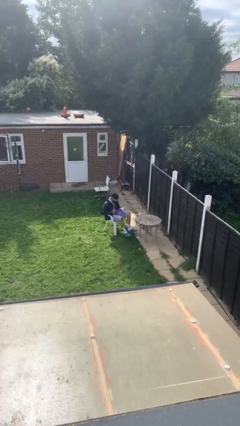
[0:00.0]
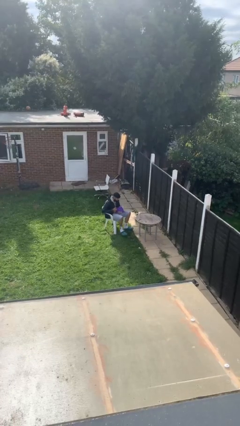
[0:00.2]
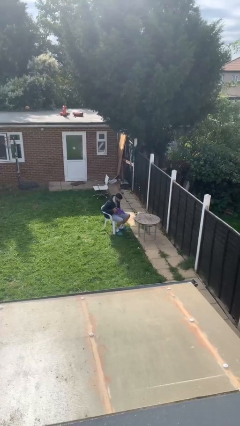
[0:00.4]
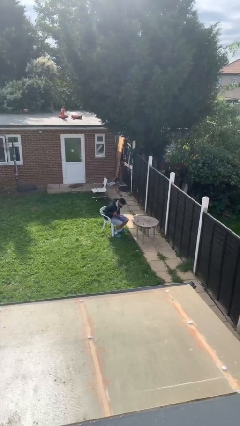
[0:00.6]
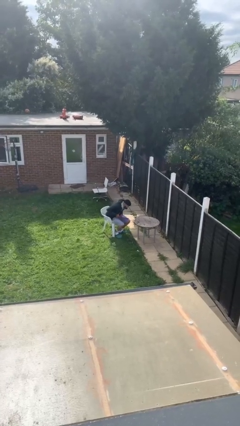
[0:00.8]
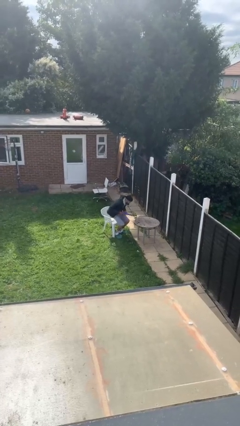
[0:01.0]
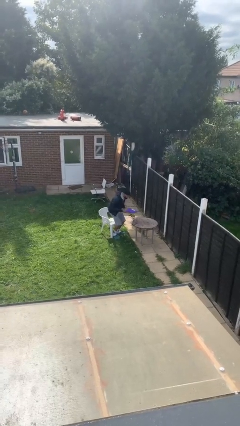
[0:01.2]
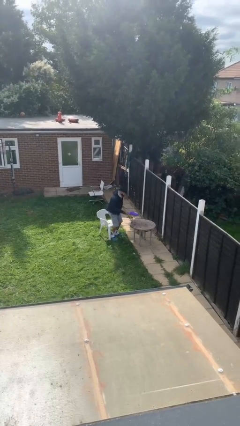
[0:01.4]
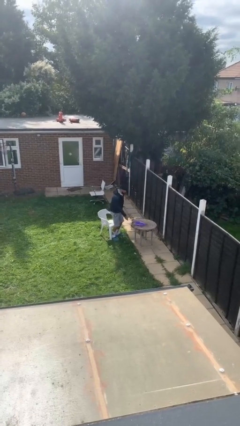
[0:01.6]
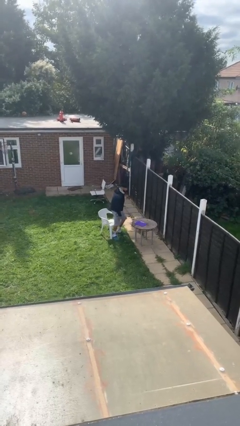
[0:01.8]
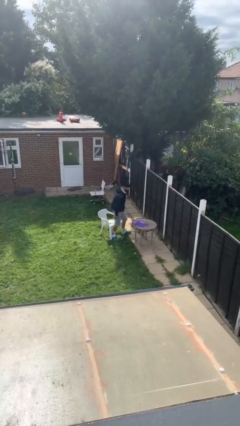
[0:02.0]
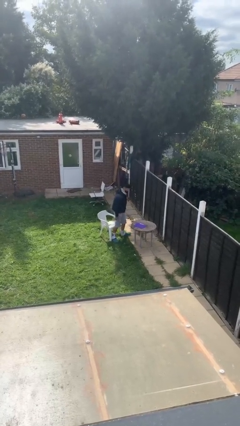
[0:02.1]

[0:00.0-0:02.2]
person stands up

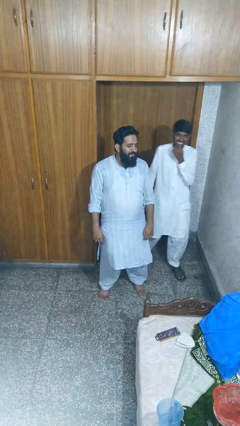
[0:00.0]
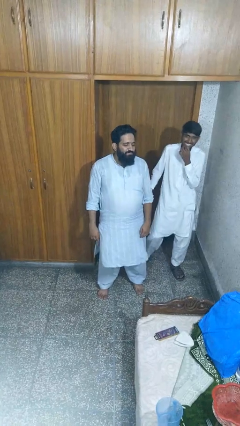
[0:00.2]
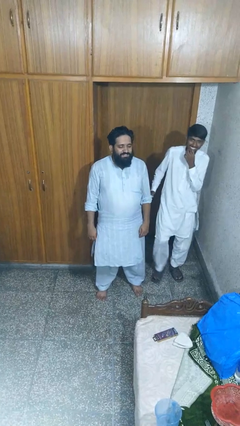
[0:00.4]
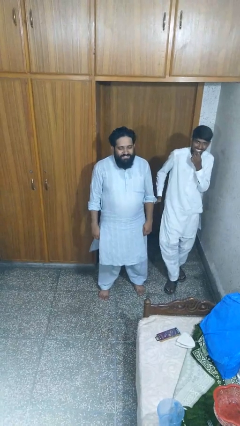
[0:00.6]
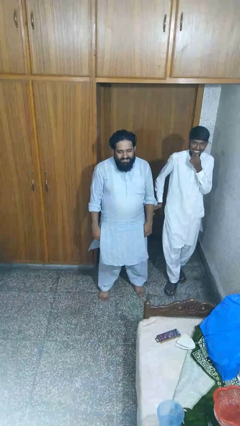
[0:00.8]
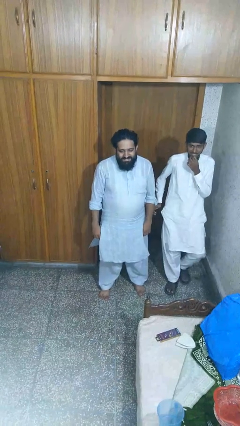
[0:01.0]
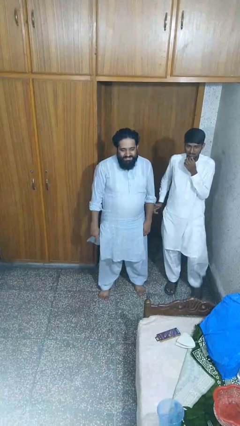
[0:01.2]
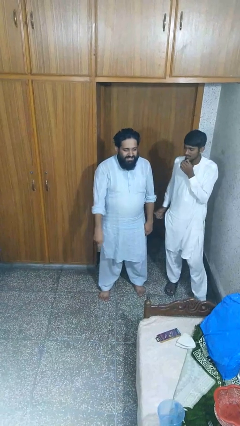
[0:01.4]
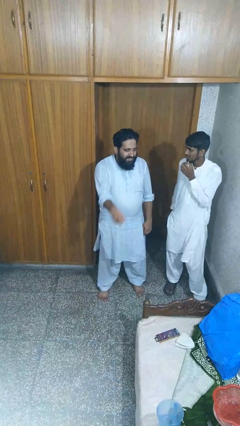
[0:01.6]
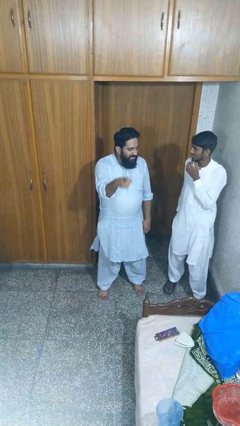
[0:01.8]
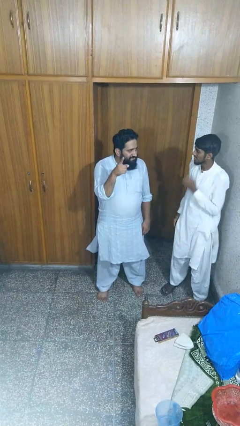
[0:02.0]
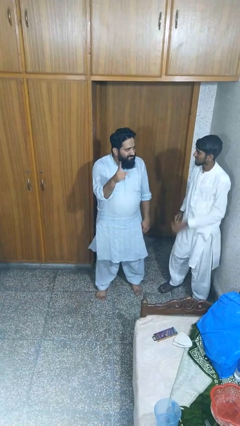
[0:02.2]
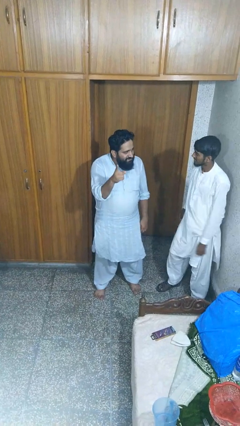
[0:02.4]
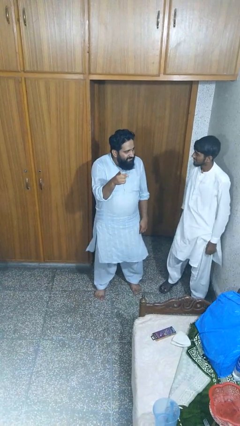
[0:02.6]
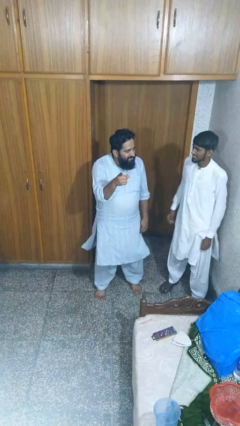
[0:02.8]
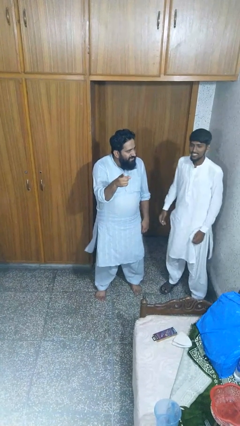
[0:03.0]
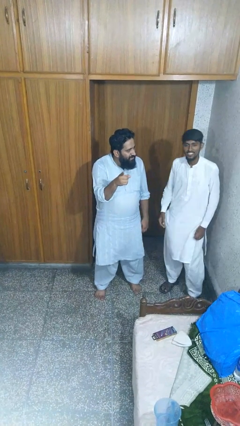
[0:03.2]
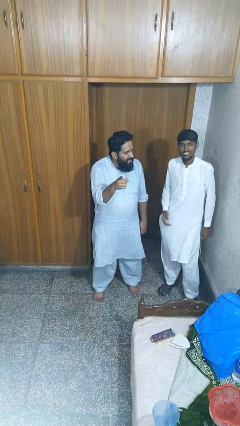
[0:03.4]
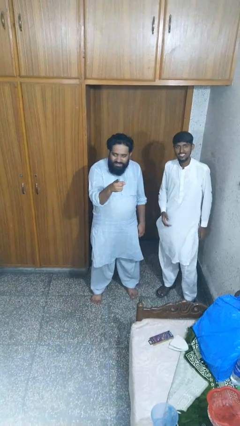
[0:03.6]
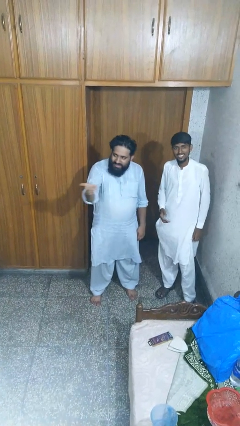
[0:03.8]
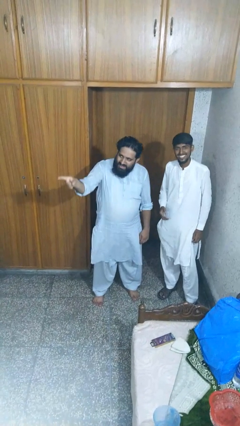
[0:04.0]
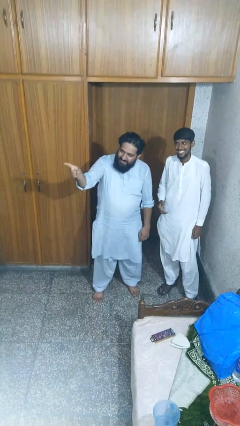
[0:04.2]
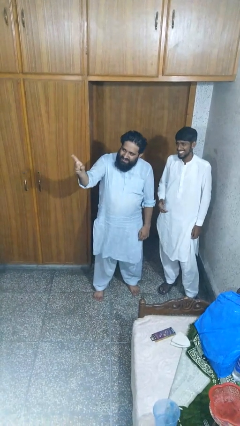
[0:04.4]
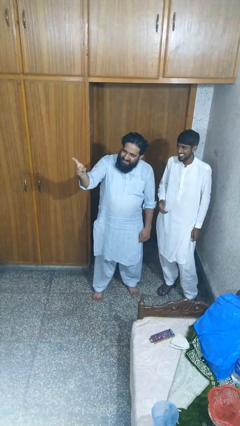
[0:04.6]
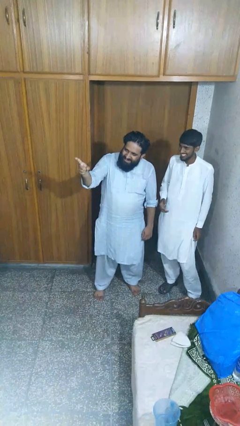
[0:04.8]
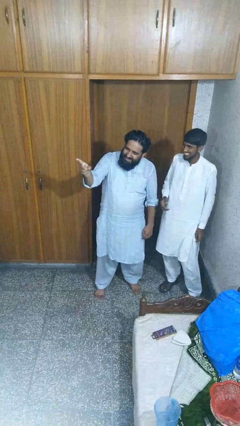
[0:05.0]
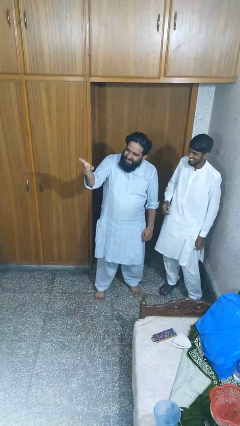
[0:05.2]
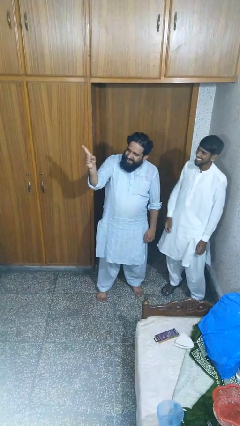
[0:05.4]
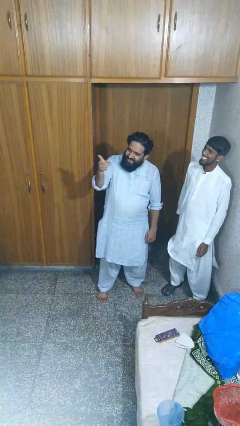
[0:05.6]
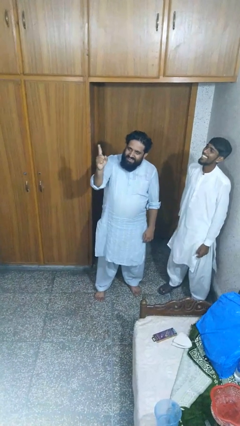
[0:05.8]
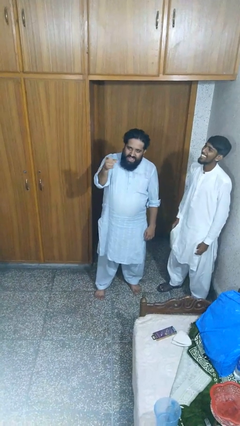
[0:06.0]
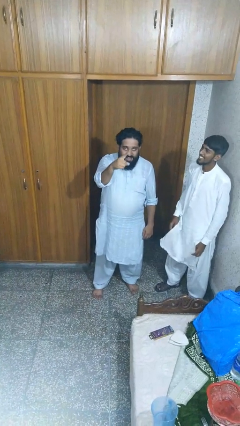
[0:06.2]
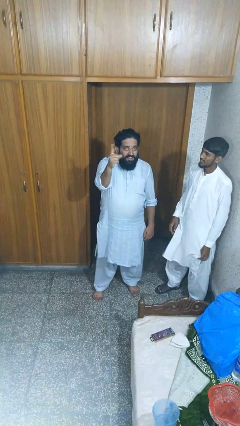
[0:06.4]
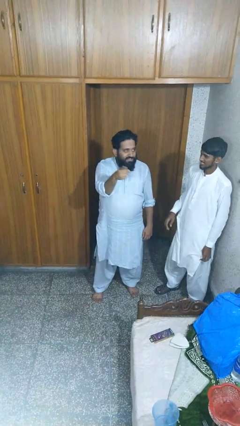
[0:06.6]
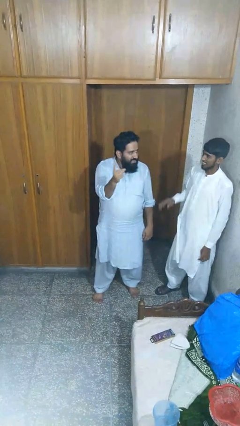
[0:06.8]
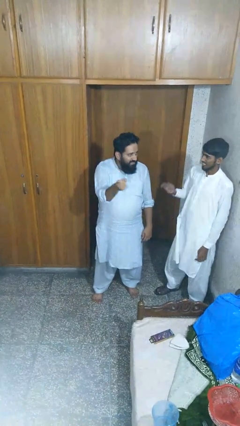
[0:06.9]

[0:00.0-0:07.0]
person points at person

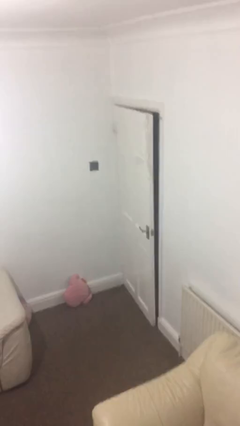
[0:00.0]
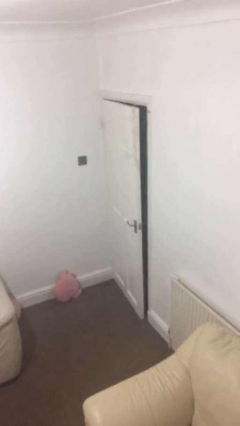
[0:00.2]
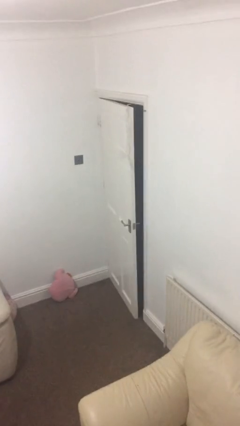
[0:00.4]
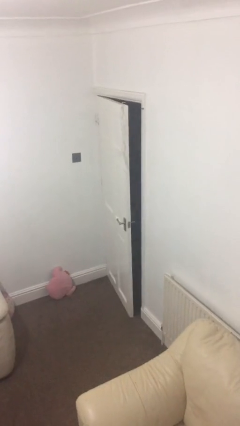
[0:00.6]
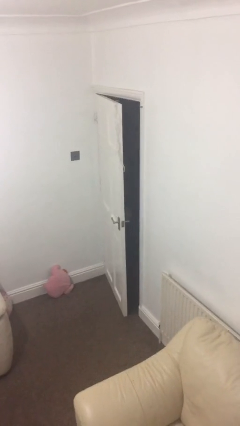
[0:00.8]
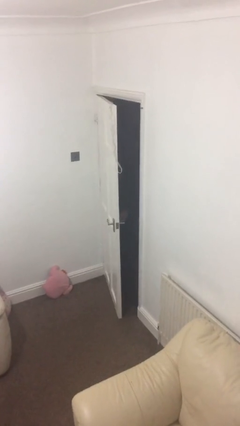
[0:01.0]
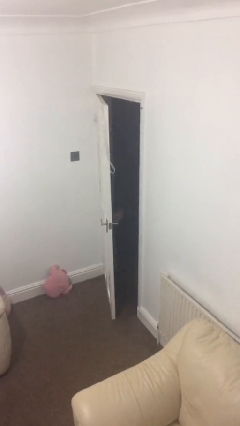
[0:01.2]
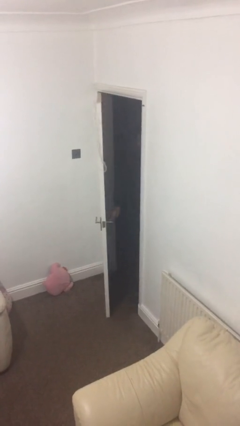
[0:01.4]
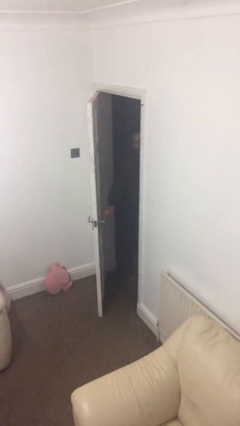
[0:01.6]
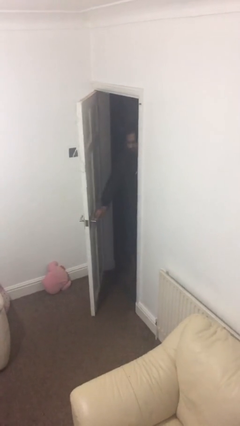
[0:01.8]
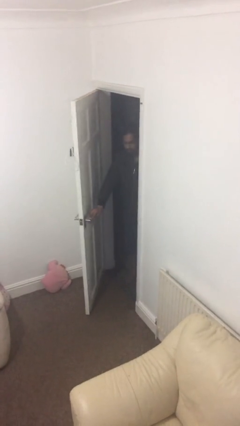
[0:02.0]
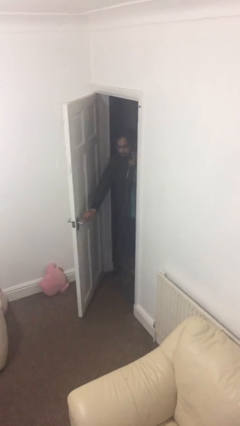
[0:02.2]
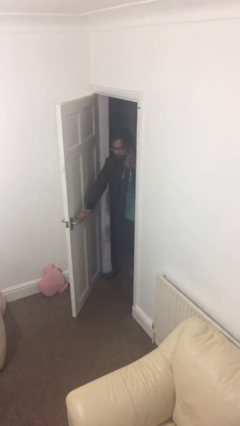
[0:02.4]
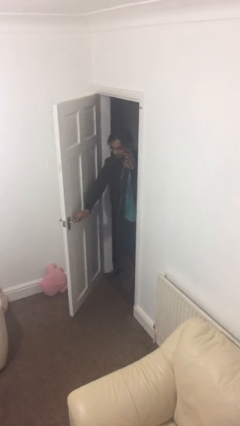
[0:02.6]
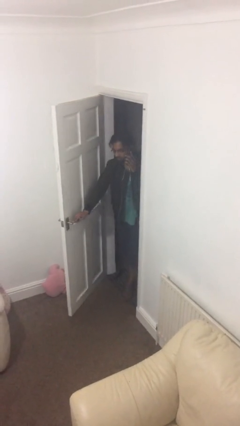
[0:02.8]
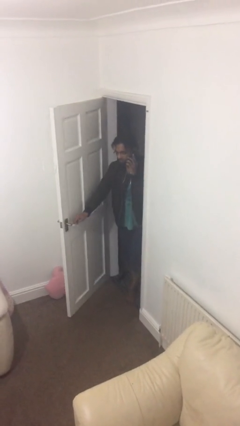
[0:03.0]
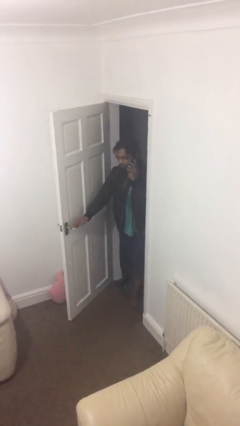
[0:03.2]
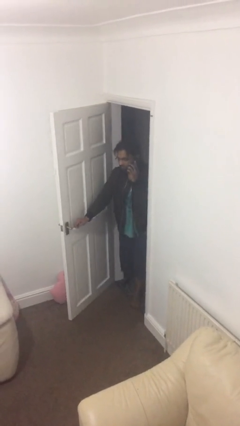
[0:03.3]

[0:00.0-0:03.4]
person opens facility door

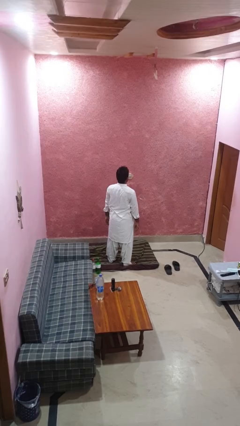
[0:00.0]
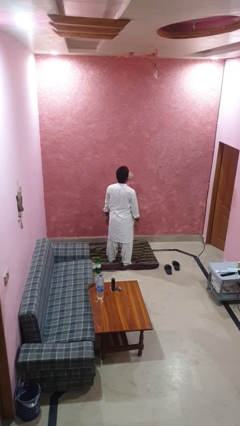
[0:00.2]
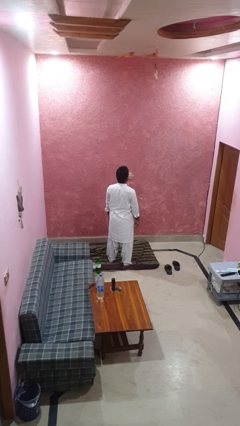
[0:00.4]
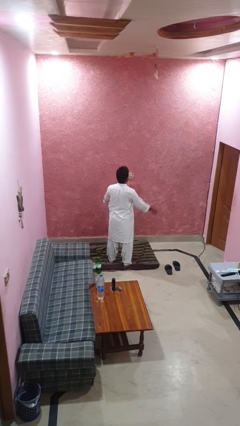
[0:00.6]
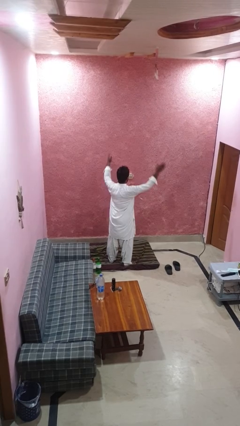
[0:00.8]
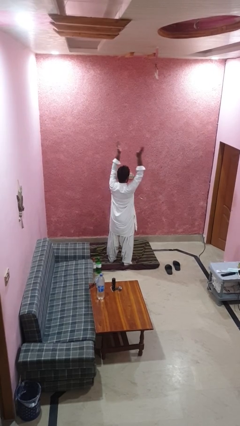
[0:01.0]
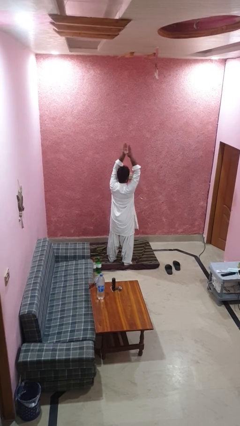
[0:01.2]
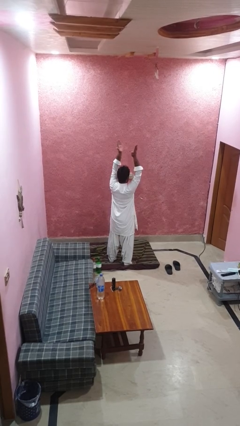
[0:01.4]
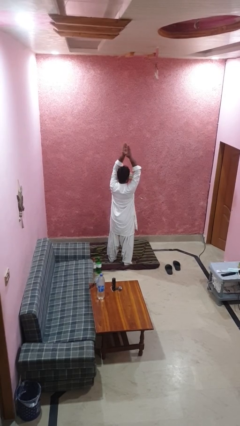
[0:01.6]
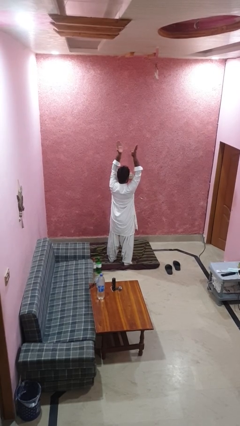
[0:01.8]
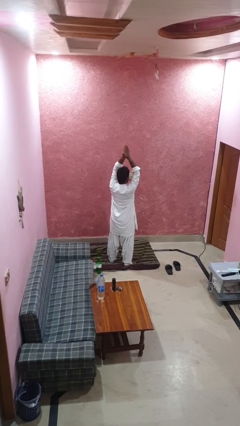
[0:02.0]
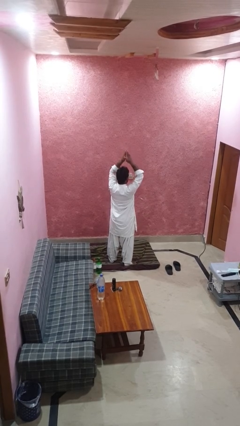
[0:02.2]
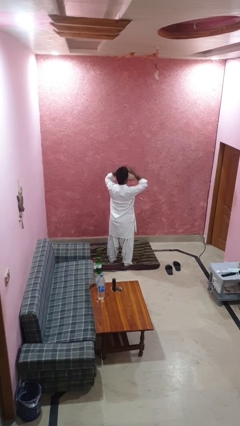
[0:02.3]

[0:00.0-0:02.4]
person claps hands

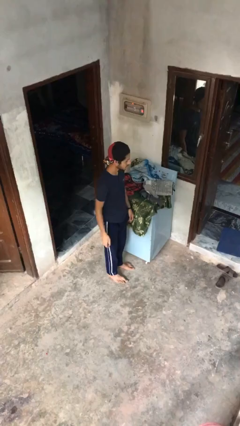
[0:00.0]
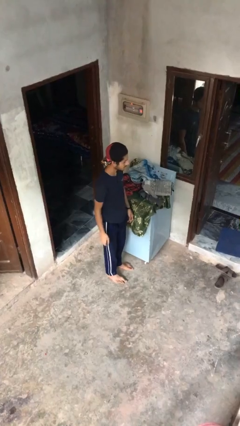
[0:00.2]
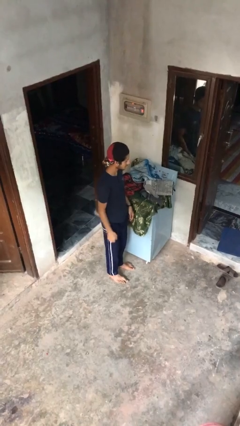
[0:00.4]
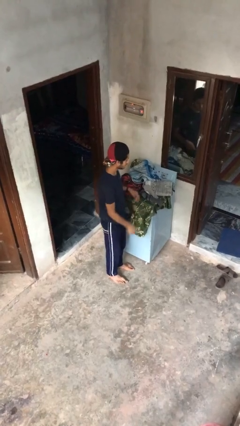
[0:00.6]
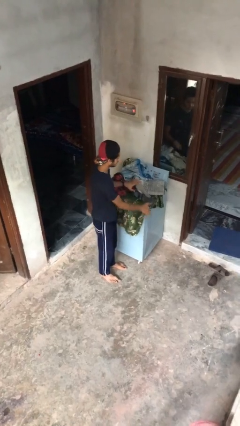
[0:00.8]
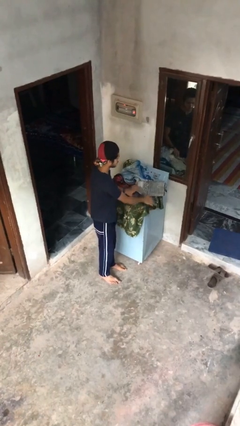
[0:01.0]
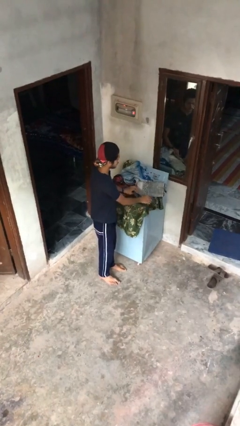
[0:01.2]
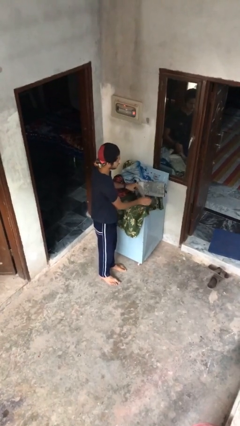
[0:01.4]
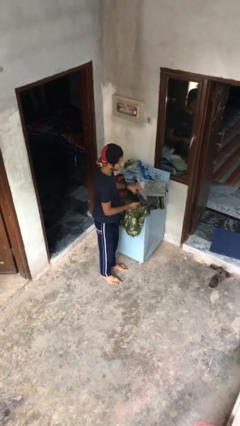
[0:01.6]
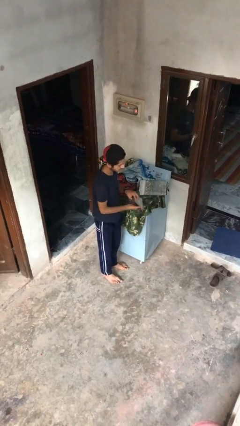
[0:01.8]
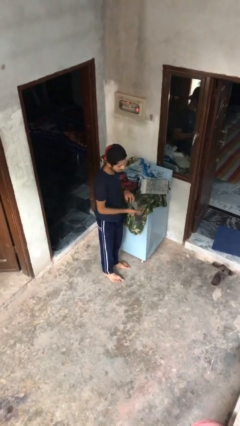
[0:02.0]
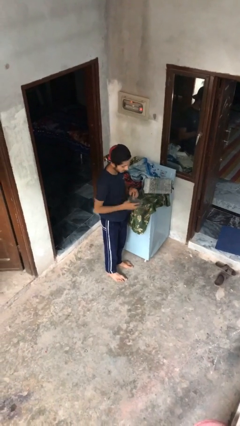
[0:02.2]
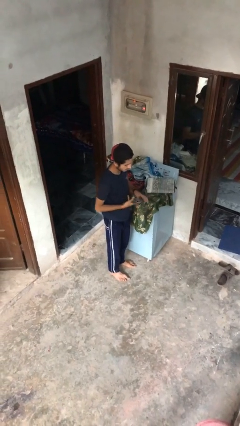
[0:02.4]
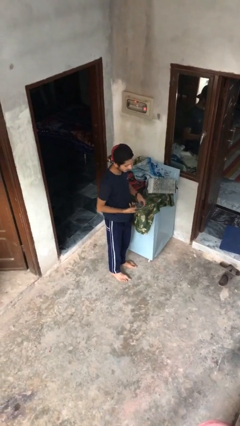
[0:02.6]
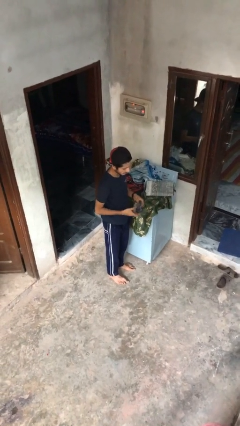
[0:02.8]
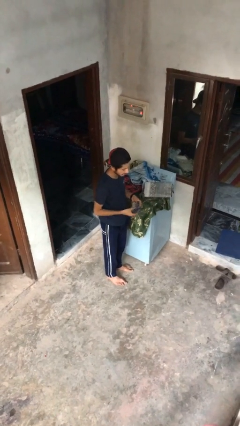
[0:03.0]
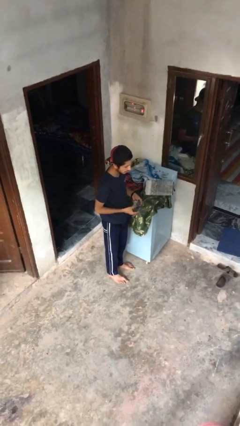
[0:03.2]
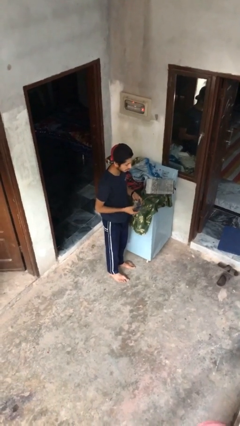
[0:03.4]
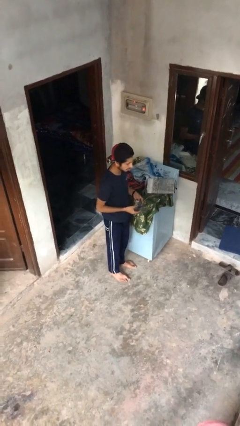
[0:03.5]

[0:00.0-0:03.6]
person folds socks
